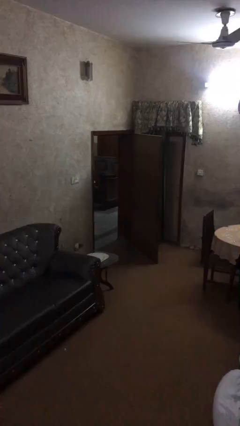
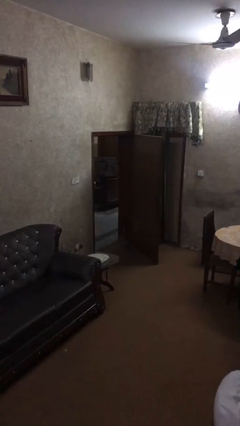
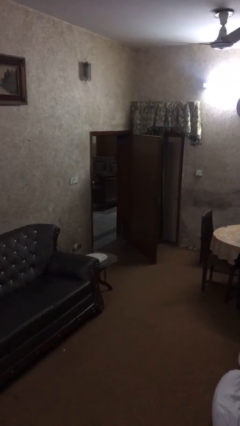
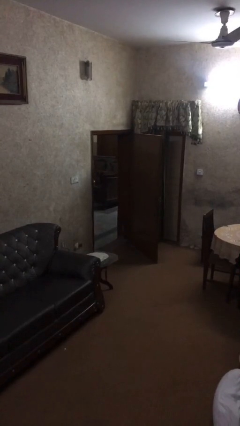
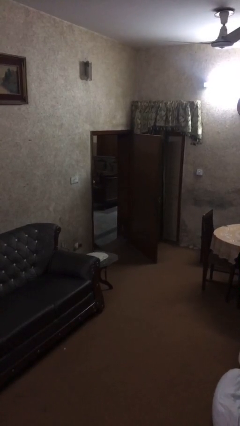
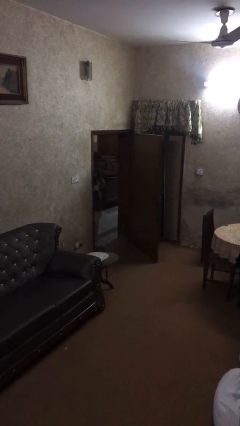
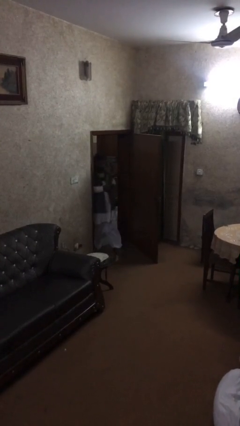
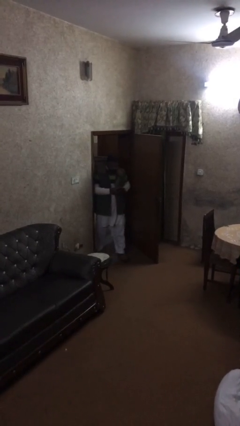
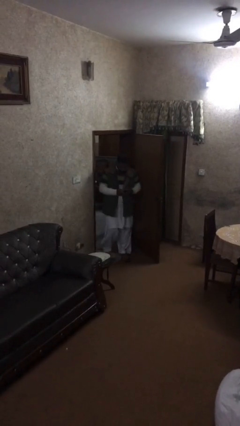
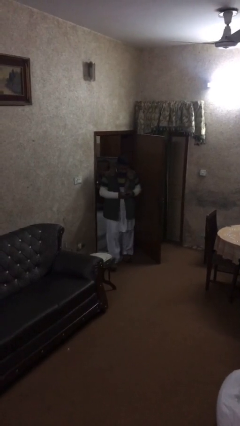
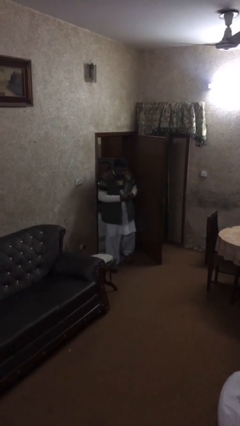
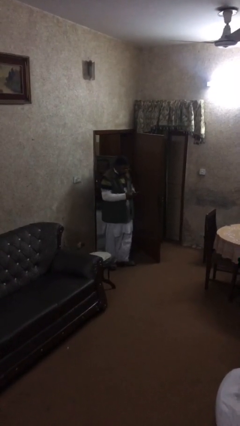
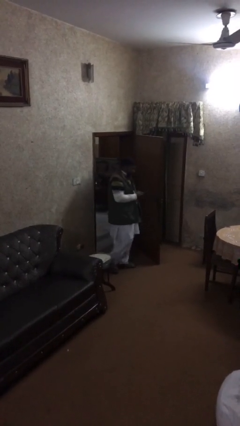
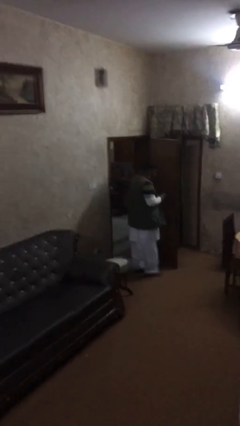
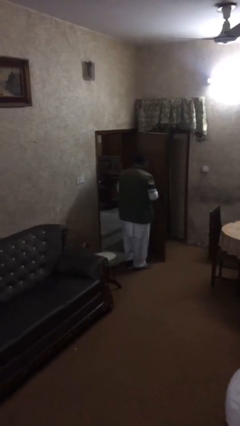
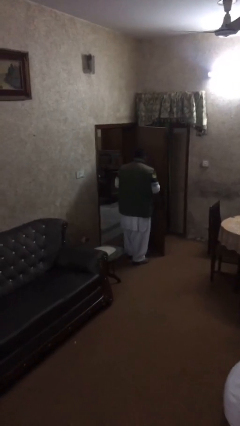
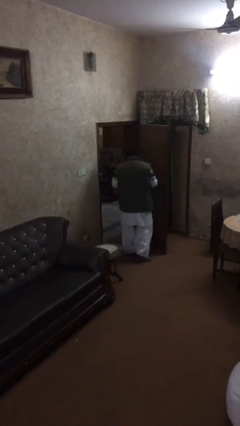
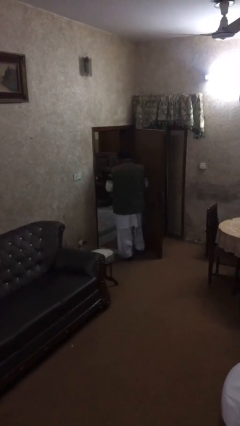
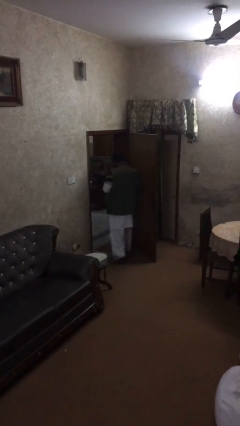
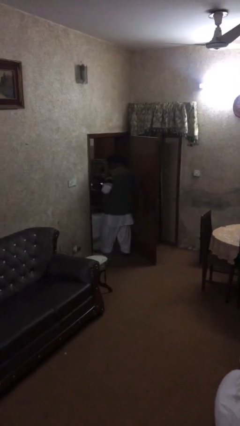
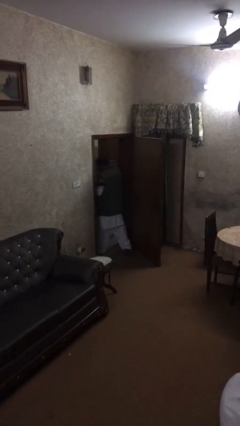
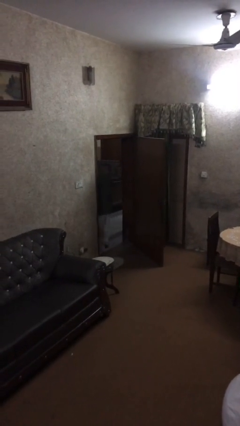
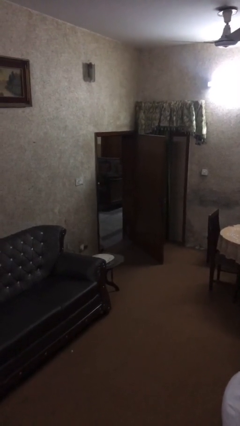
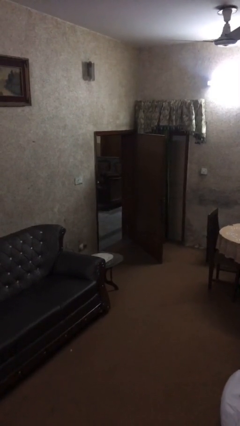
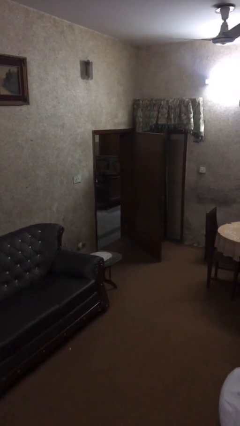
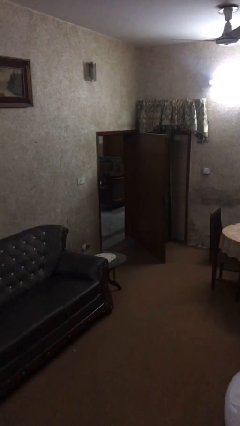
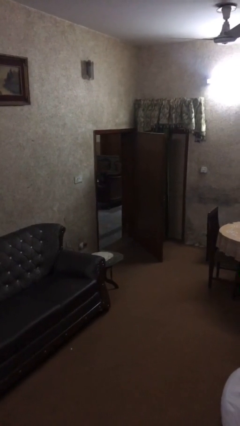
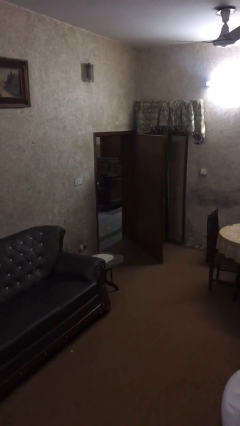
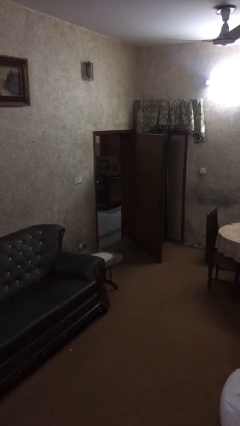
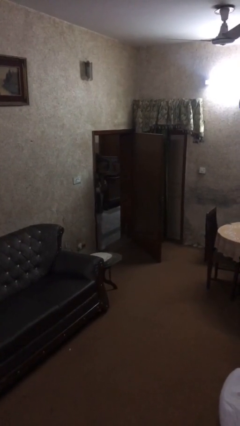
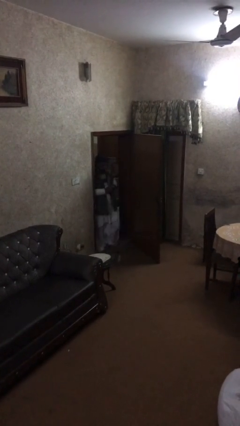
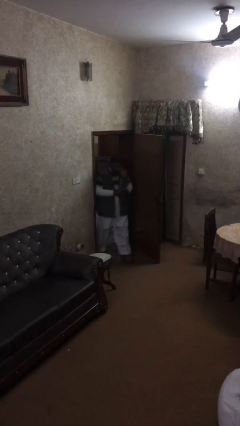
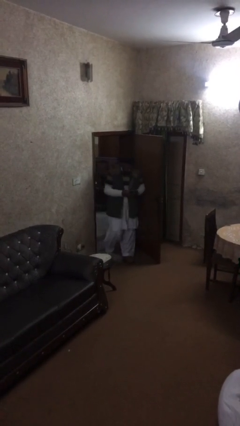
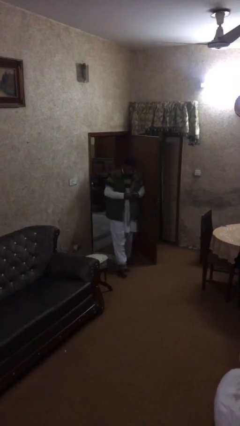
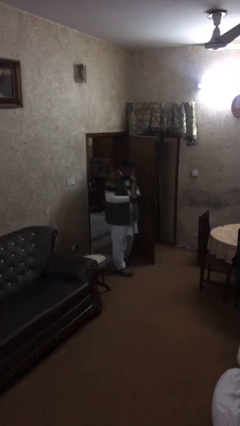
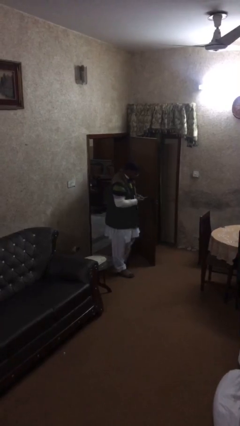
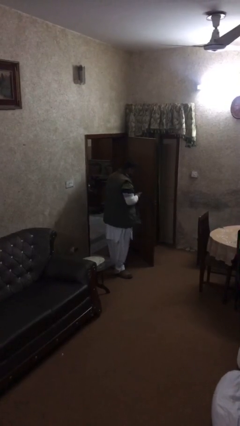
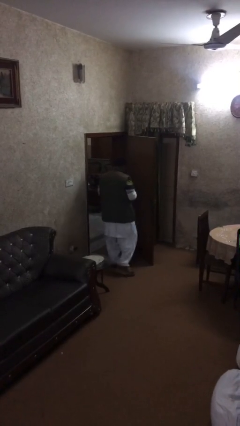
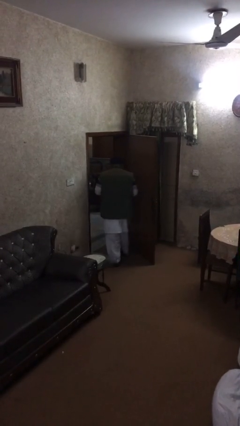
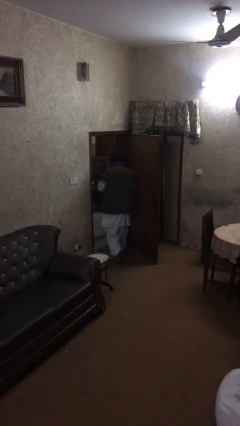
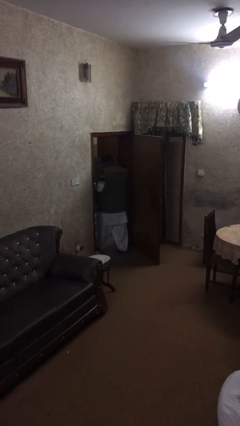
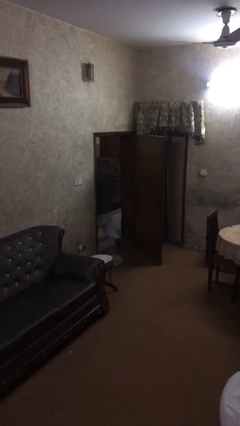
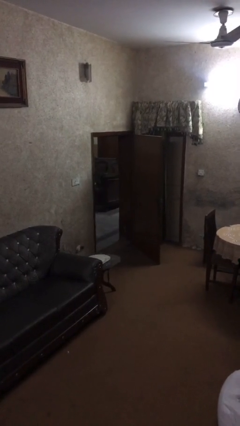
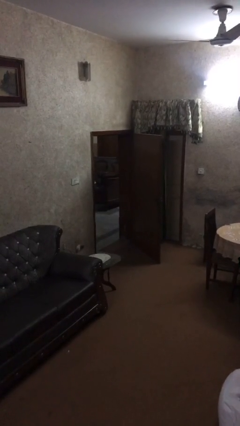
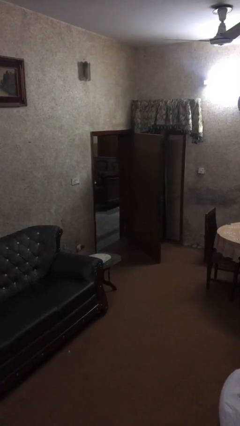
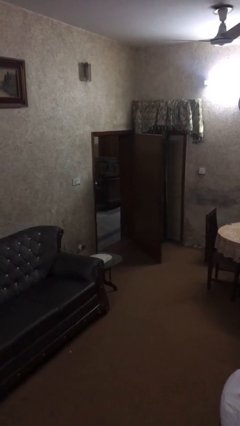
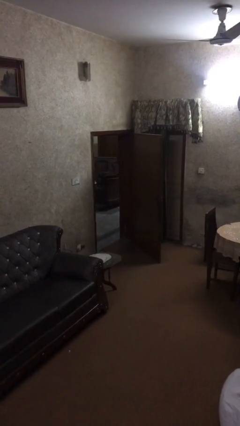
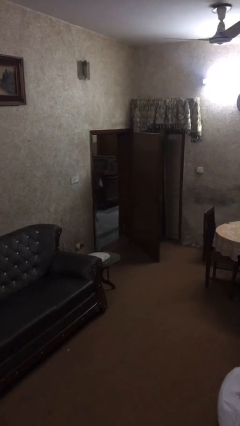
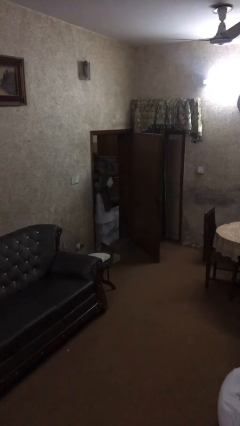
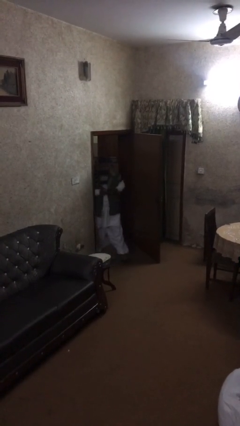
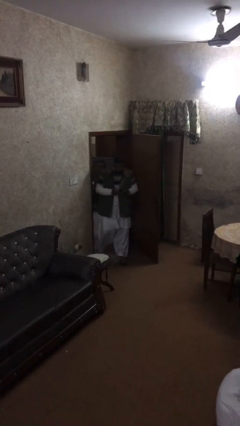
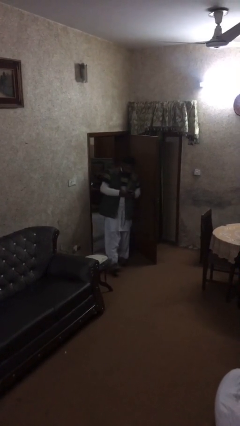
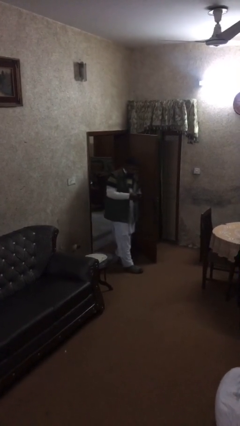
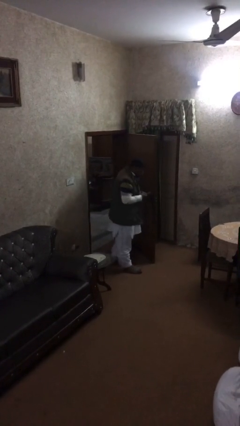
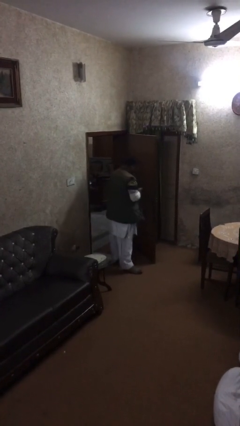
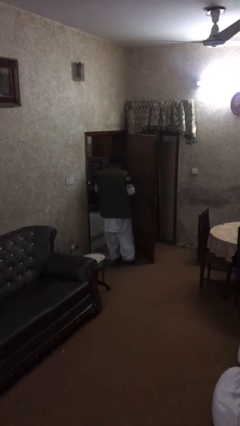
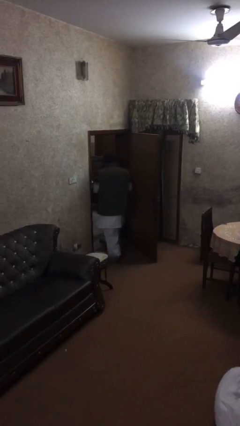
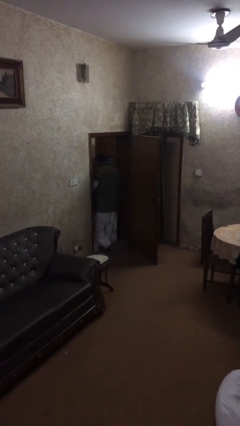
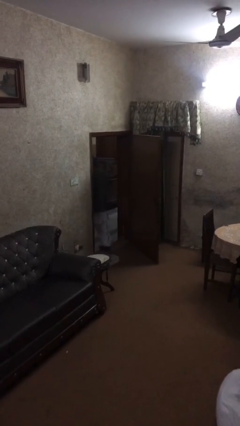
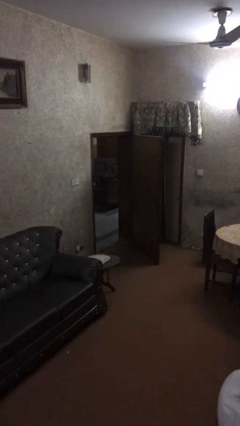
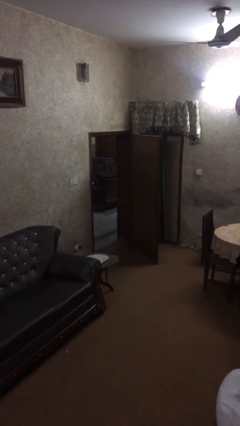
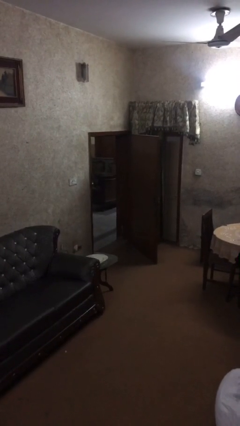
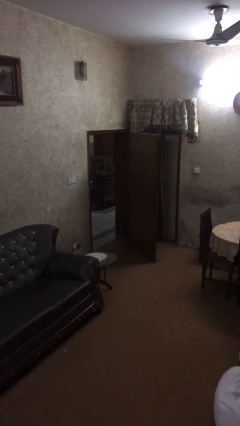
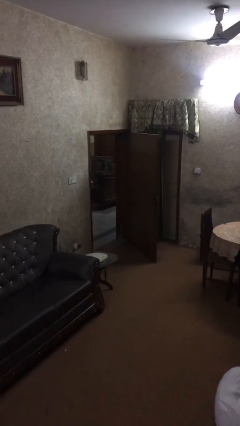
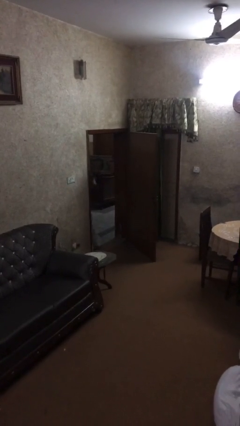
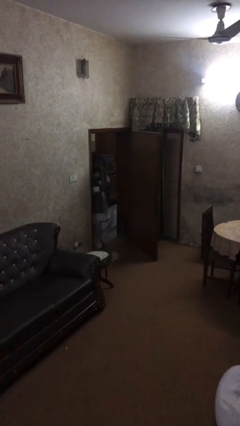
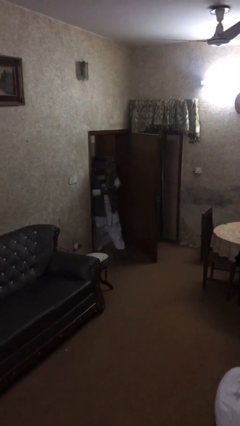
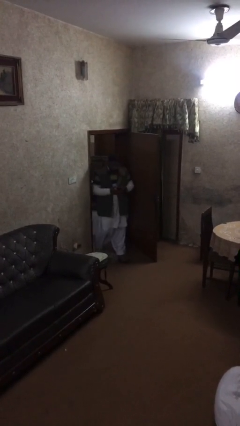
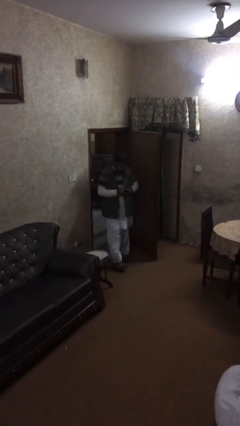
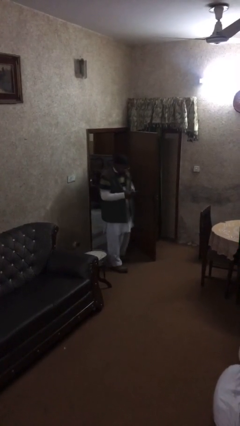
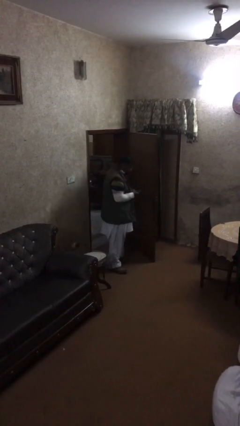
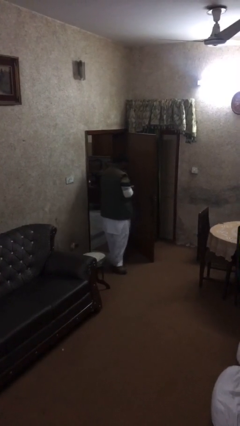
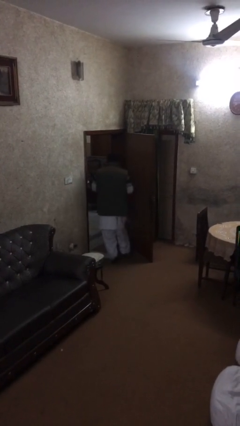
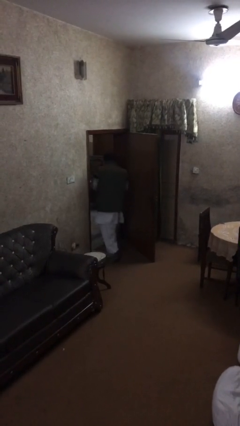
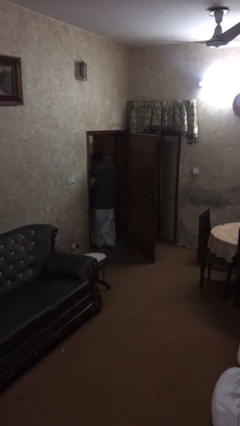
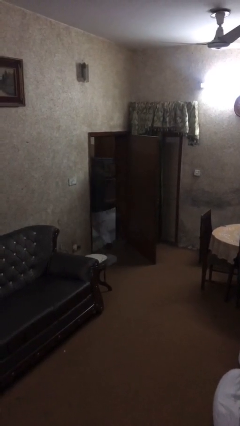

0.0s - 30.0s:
person texts on phone

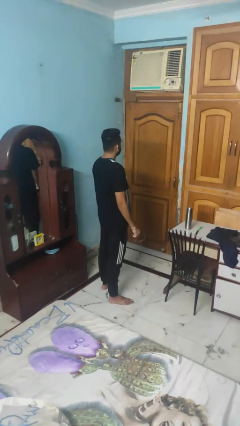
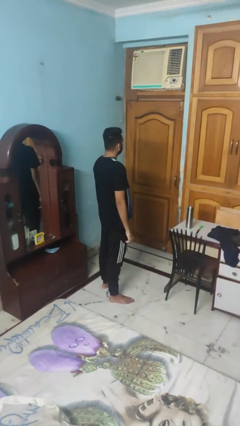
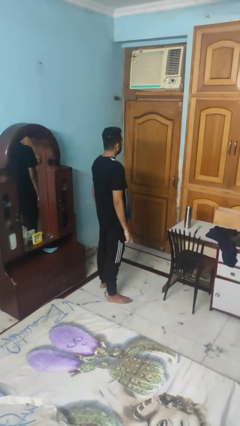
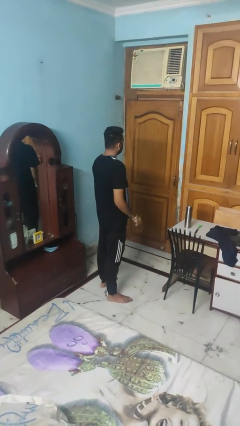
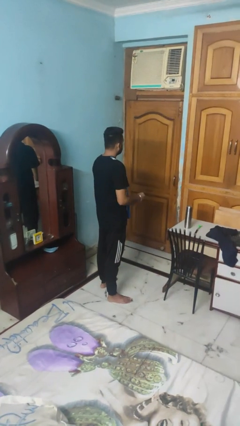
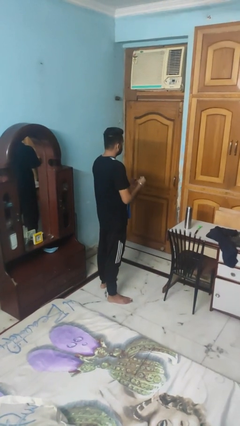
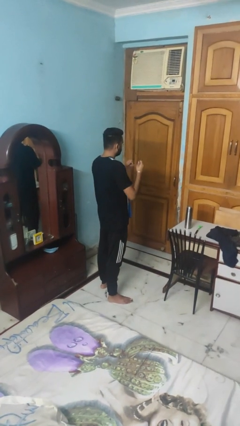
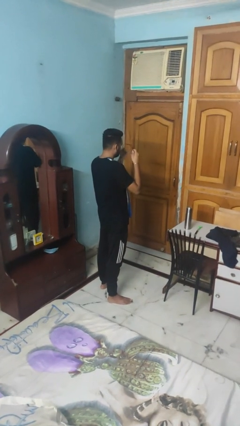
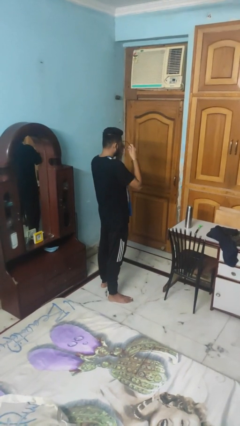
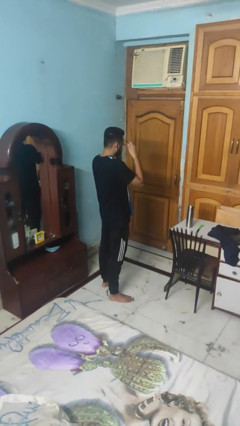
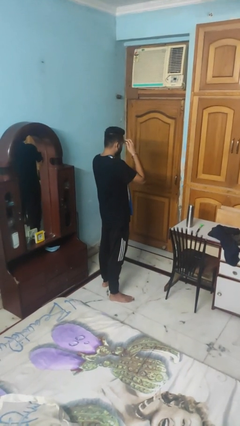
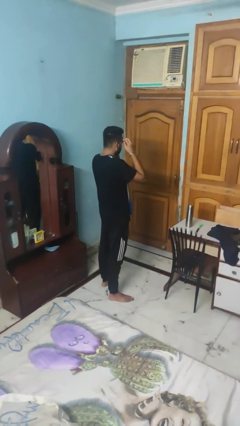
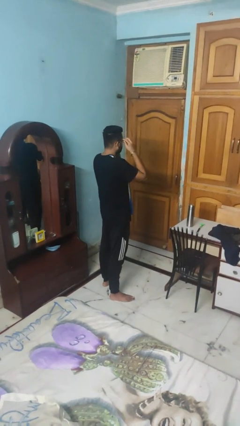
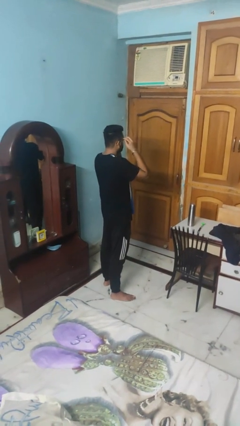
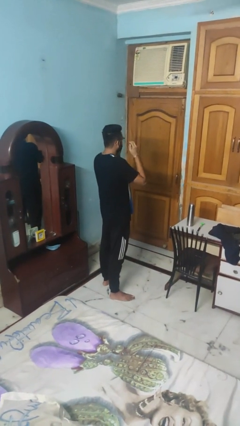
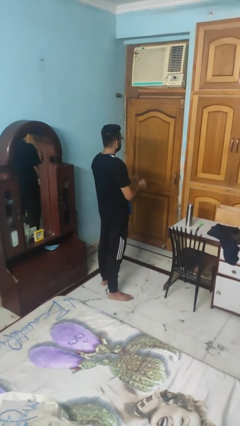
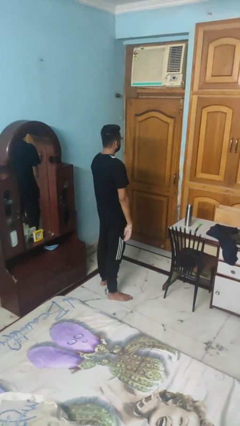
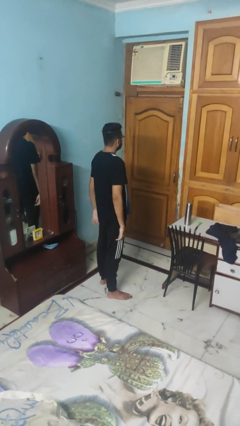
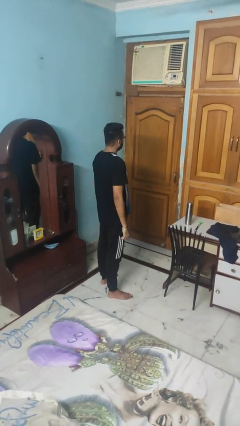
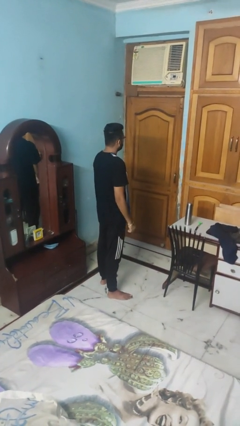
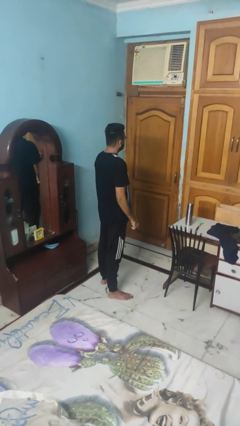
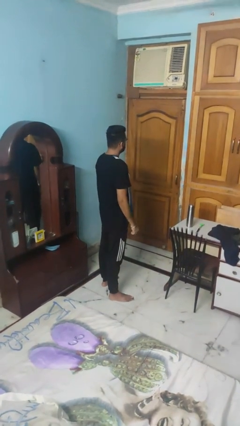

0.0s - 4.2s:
person puts on glasses
